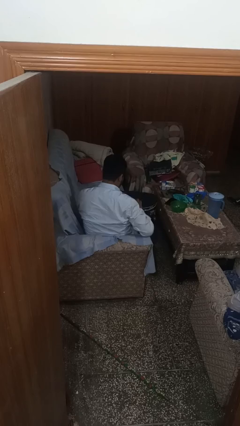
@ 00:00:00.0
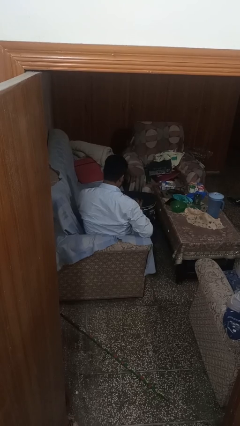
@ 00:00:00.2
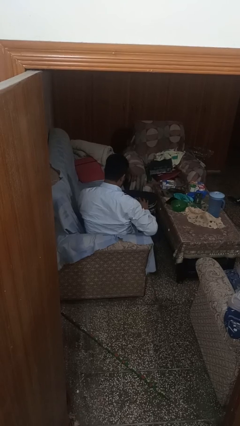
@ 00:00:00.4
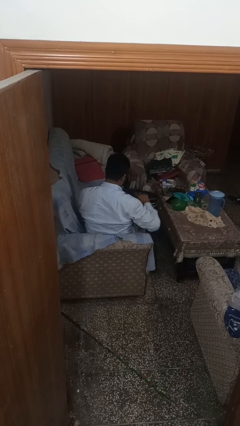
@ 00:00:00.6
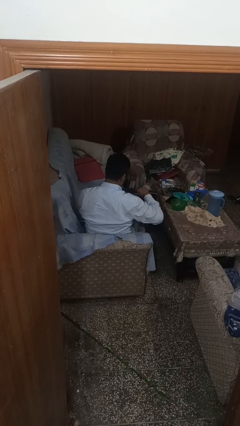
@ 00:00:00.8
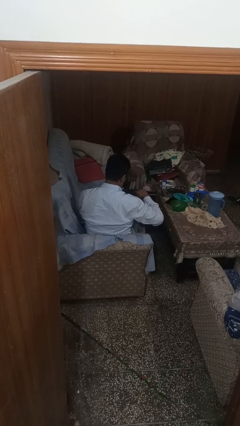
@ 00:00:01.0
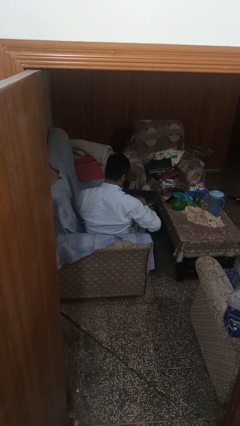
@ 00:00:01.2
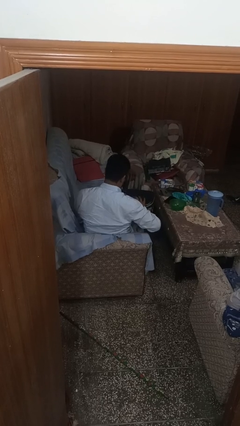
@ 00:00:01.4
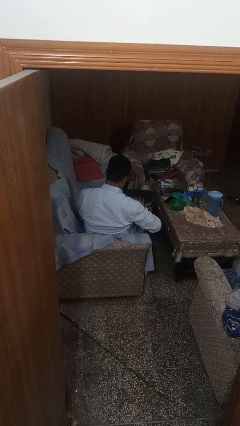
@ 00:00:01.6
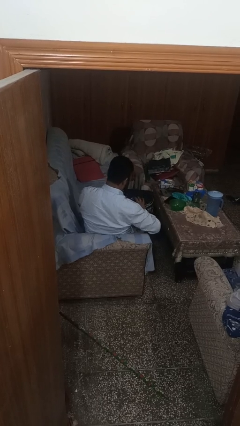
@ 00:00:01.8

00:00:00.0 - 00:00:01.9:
person closes suitcase

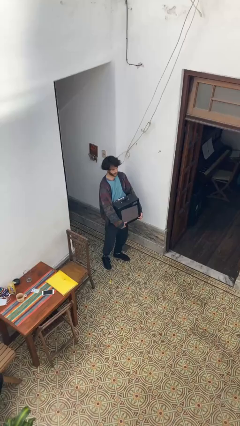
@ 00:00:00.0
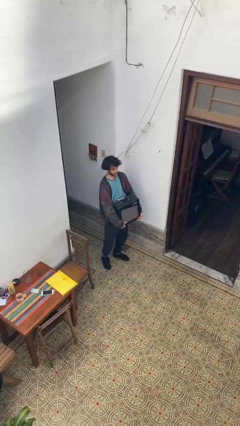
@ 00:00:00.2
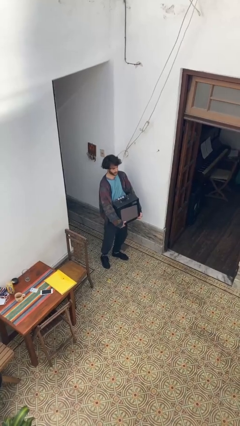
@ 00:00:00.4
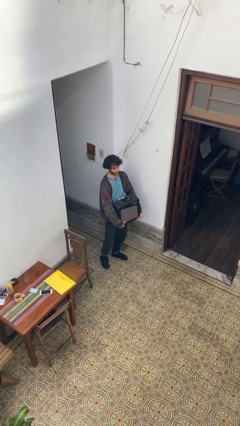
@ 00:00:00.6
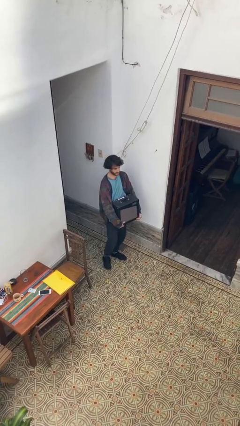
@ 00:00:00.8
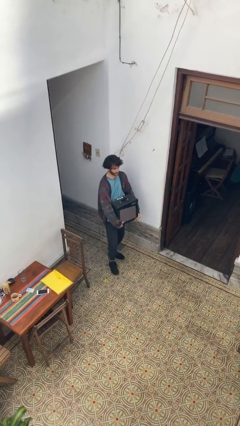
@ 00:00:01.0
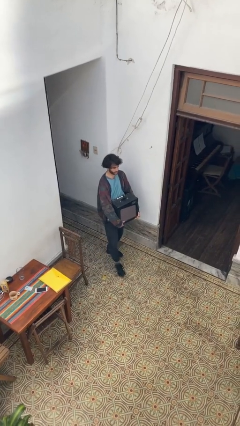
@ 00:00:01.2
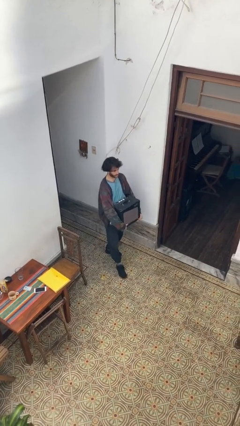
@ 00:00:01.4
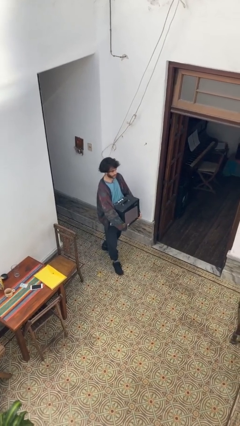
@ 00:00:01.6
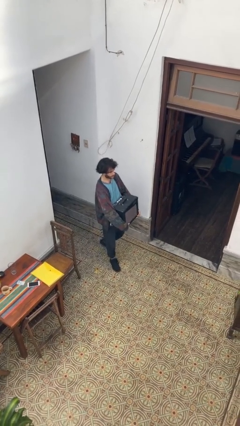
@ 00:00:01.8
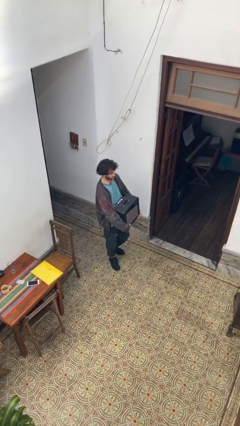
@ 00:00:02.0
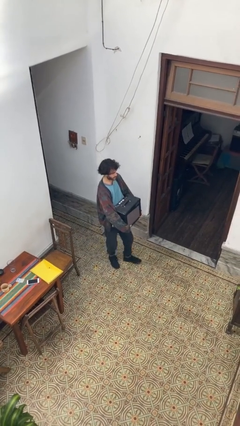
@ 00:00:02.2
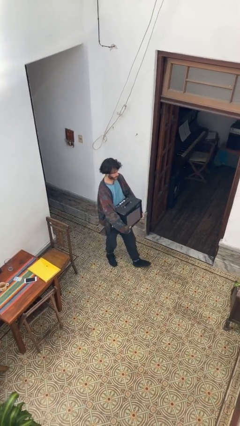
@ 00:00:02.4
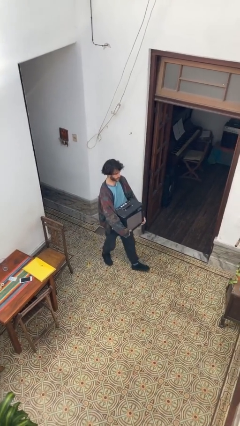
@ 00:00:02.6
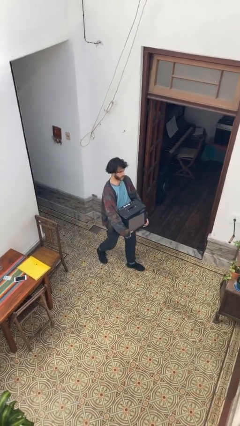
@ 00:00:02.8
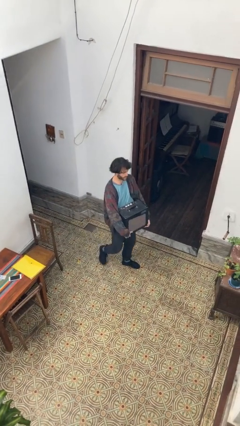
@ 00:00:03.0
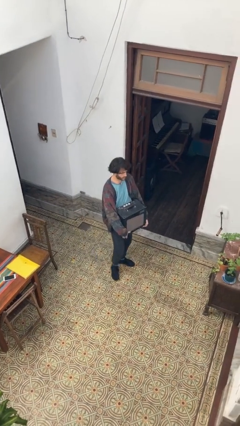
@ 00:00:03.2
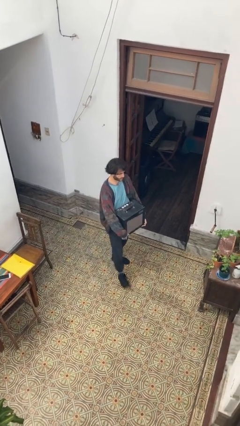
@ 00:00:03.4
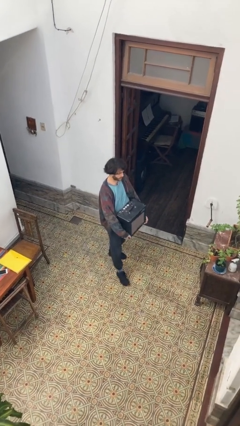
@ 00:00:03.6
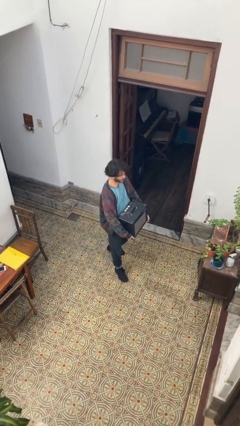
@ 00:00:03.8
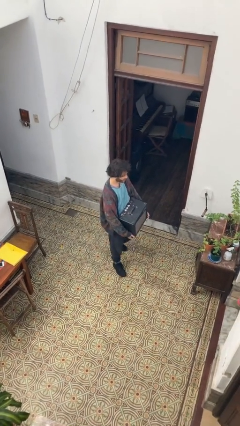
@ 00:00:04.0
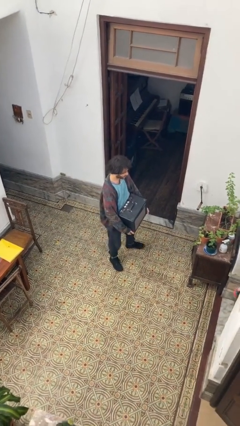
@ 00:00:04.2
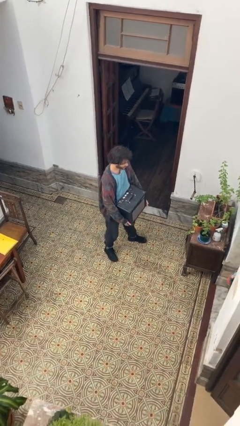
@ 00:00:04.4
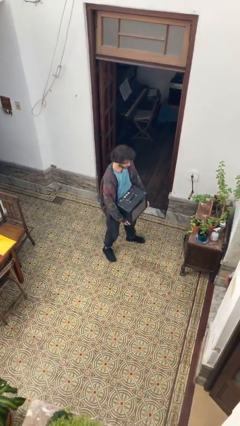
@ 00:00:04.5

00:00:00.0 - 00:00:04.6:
person carries heavy object

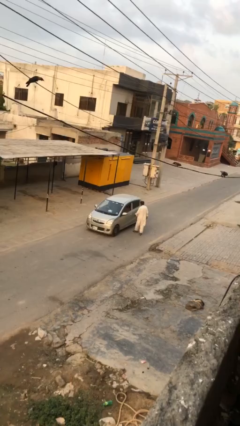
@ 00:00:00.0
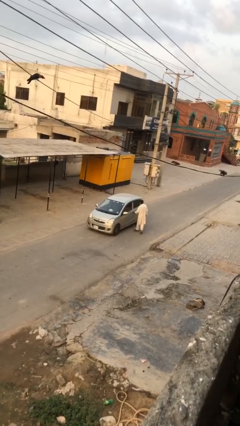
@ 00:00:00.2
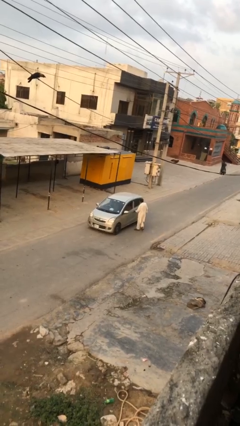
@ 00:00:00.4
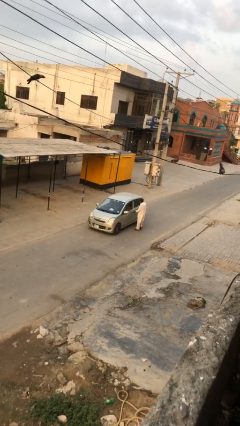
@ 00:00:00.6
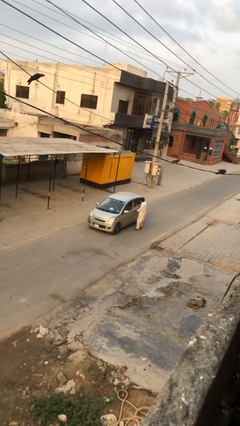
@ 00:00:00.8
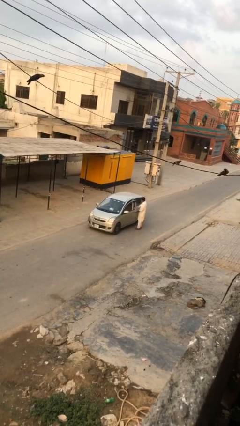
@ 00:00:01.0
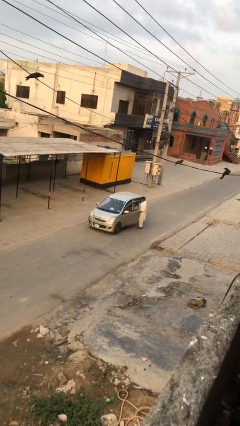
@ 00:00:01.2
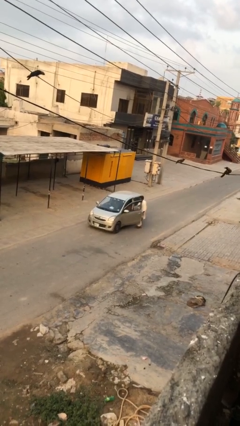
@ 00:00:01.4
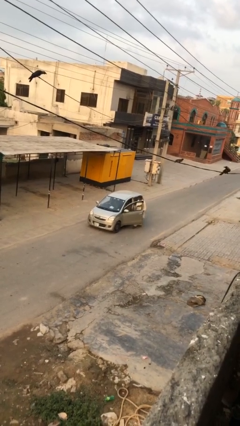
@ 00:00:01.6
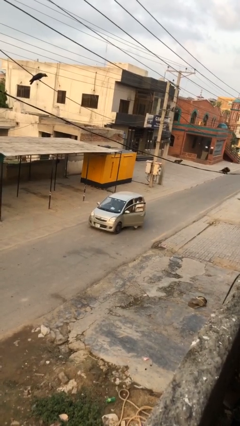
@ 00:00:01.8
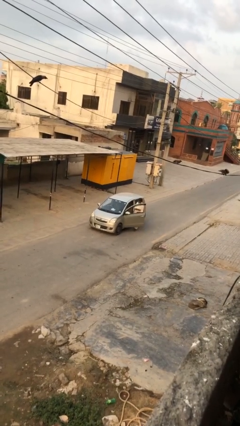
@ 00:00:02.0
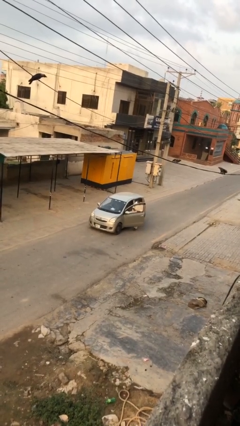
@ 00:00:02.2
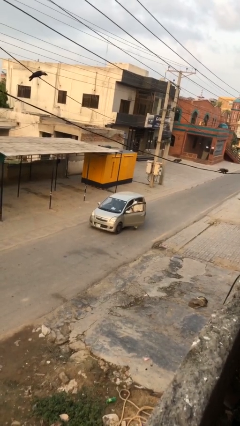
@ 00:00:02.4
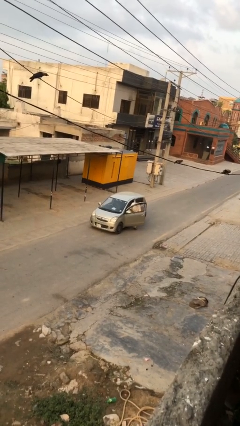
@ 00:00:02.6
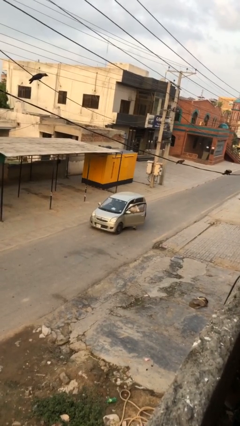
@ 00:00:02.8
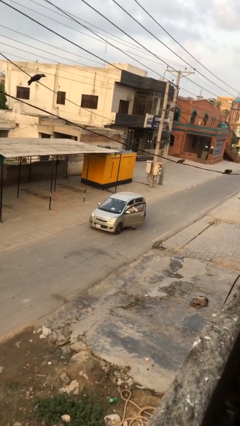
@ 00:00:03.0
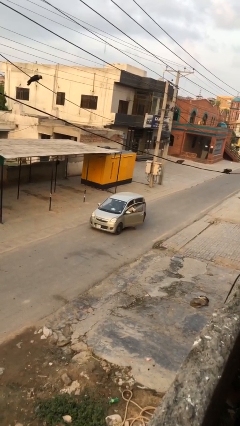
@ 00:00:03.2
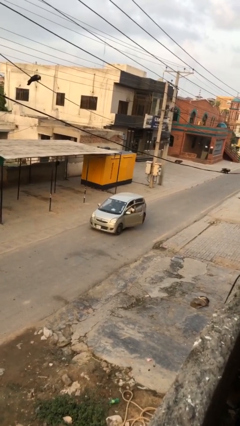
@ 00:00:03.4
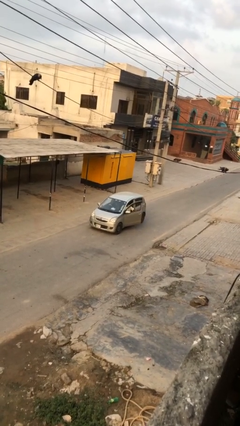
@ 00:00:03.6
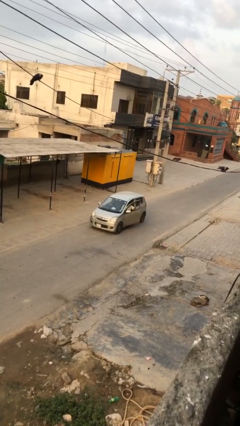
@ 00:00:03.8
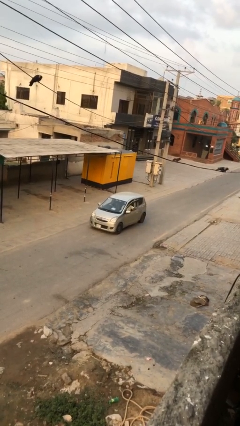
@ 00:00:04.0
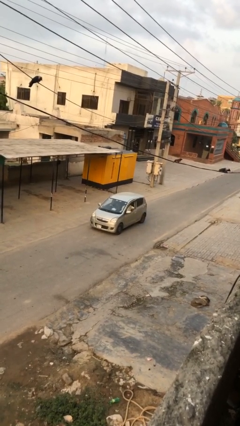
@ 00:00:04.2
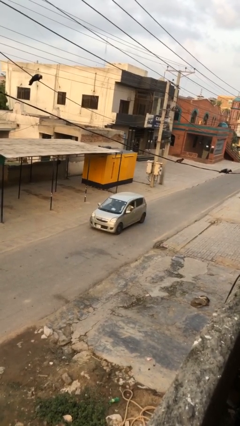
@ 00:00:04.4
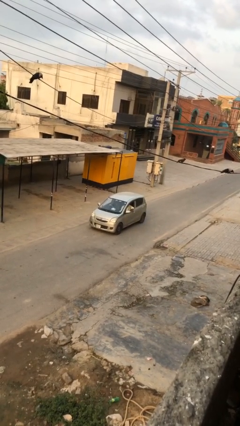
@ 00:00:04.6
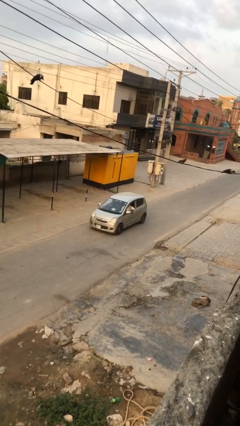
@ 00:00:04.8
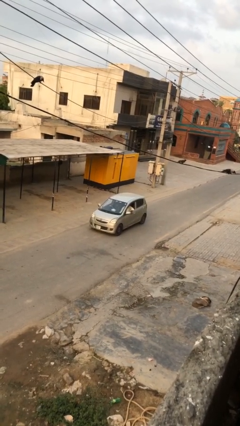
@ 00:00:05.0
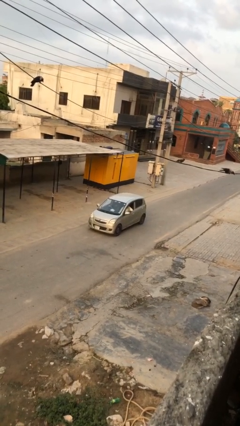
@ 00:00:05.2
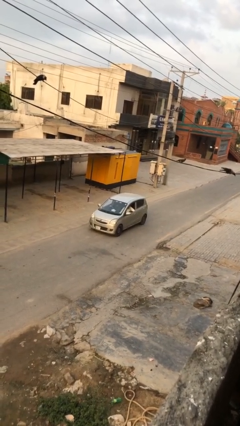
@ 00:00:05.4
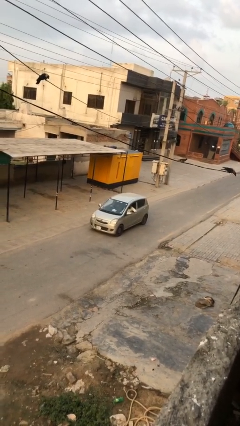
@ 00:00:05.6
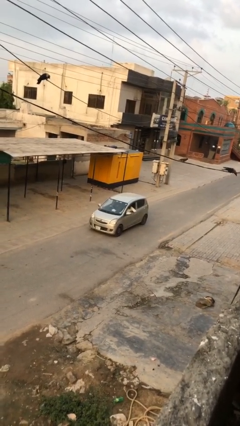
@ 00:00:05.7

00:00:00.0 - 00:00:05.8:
car picks up person

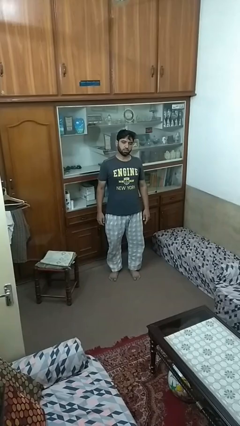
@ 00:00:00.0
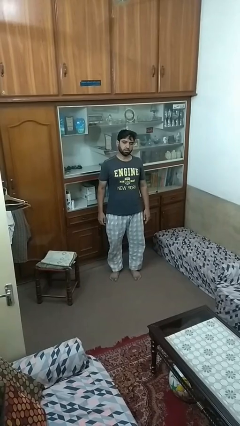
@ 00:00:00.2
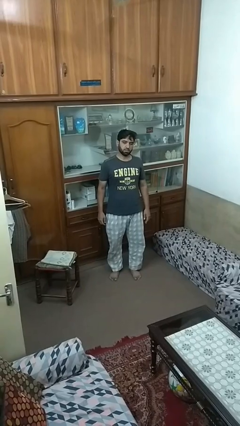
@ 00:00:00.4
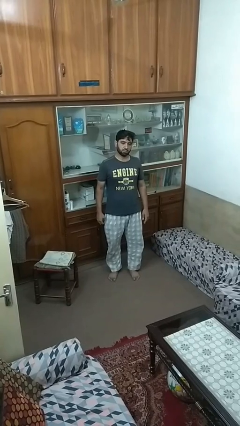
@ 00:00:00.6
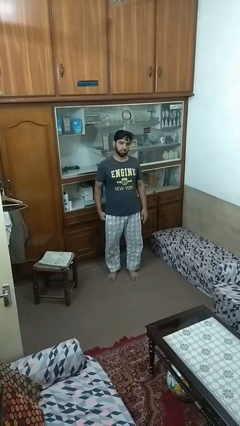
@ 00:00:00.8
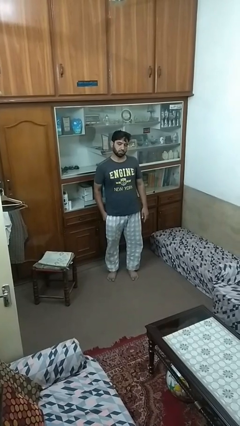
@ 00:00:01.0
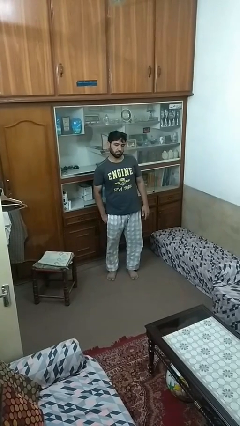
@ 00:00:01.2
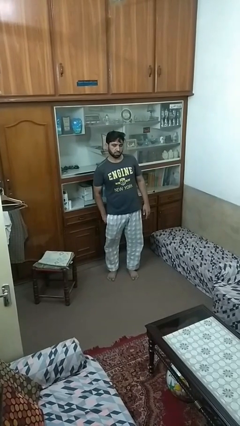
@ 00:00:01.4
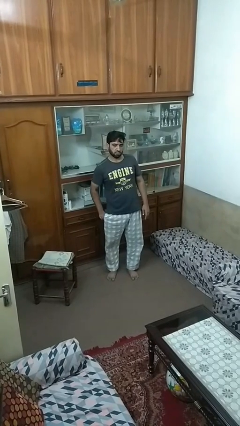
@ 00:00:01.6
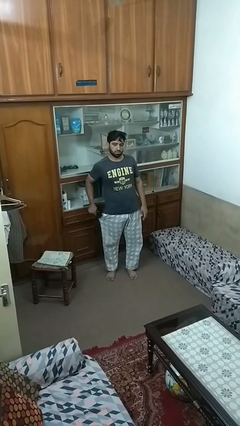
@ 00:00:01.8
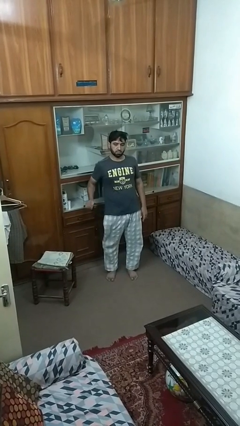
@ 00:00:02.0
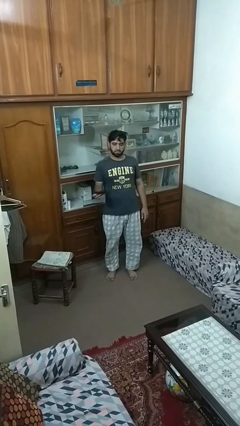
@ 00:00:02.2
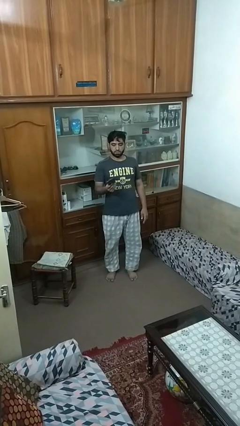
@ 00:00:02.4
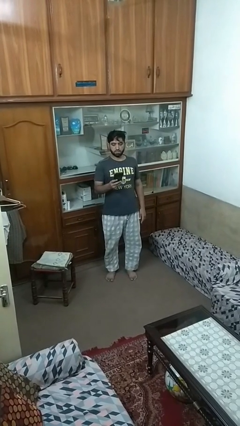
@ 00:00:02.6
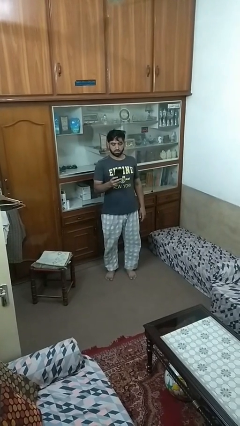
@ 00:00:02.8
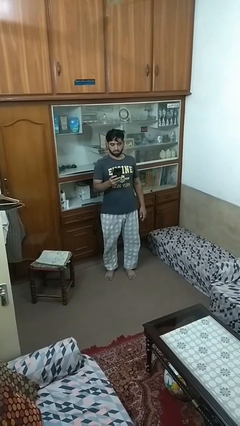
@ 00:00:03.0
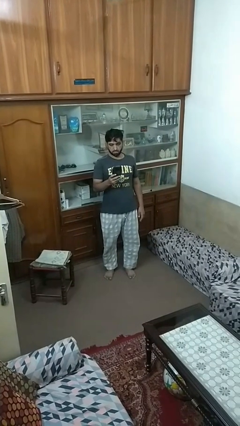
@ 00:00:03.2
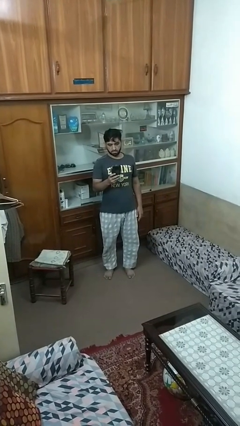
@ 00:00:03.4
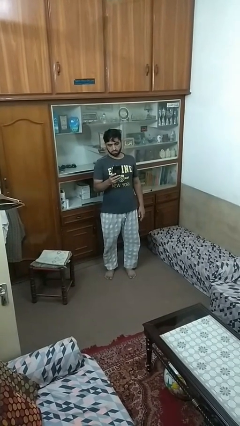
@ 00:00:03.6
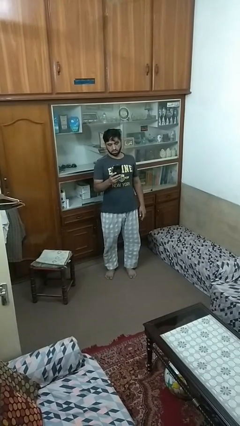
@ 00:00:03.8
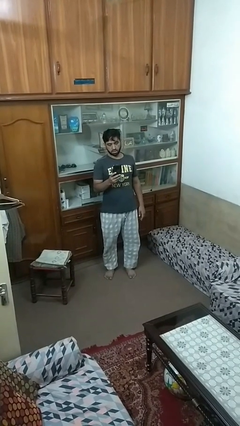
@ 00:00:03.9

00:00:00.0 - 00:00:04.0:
person takes phone from pocket

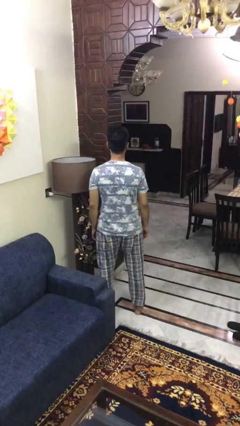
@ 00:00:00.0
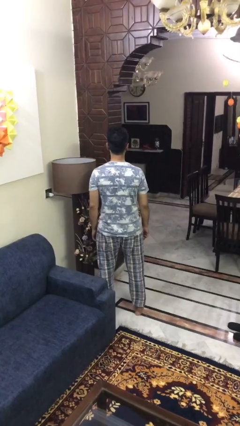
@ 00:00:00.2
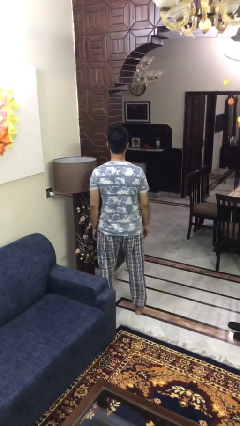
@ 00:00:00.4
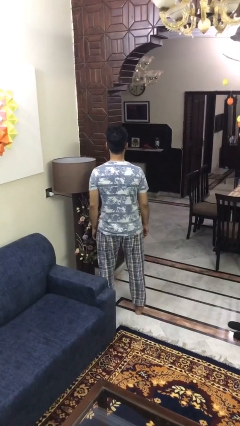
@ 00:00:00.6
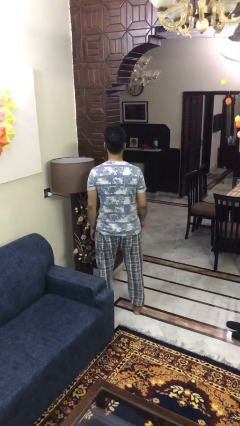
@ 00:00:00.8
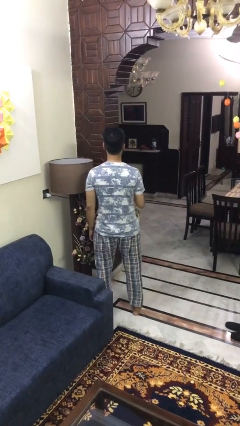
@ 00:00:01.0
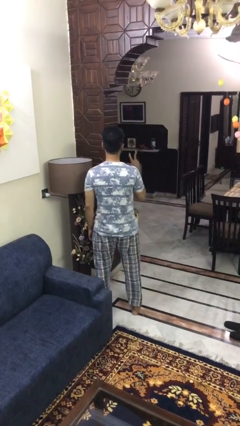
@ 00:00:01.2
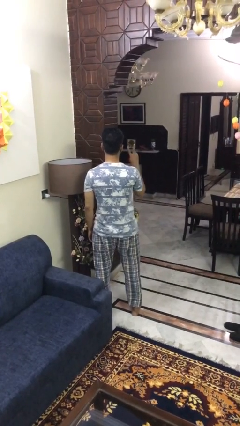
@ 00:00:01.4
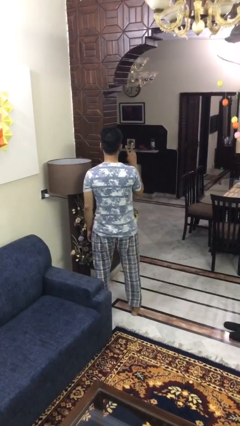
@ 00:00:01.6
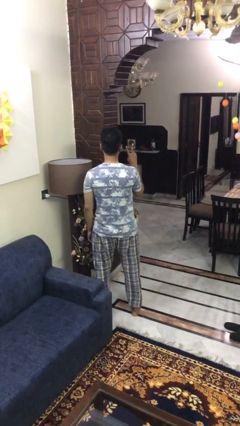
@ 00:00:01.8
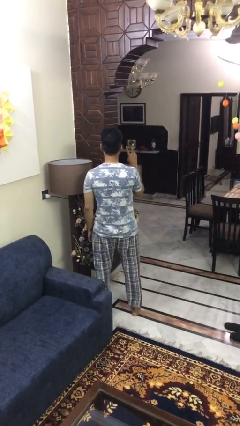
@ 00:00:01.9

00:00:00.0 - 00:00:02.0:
person gestures peace
